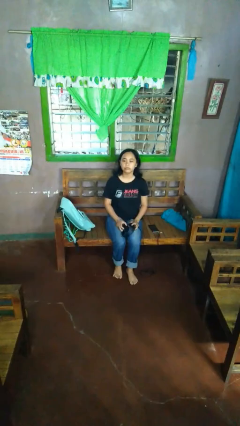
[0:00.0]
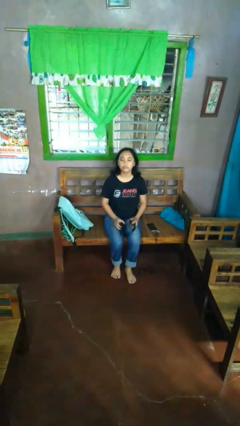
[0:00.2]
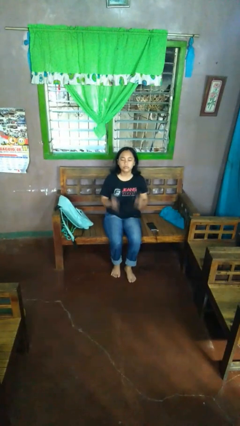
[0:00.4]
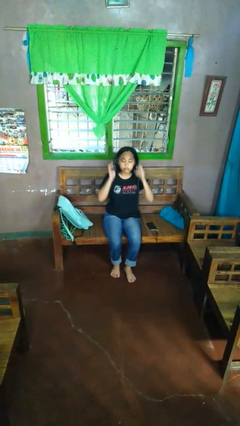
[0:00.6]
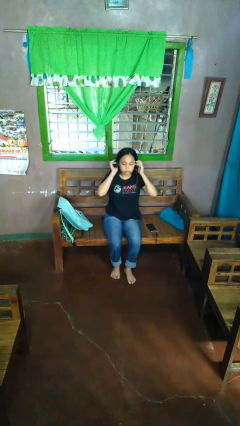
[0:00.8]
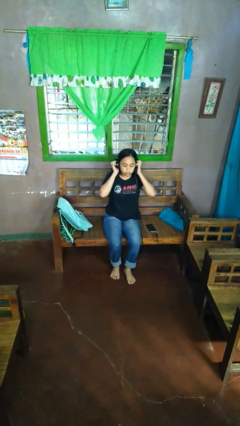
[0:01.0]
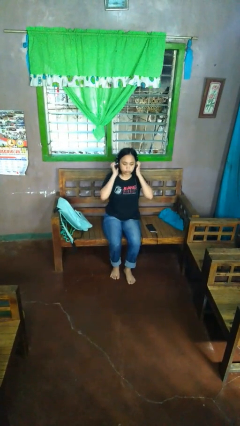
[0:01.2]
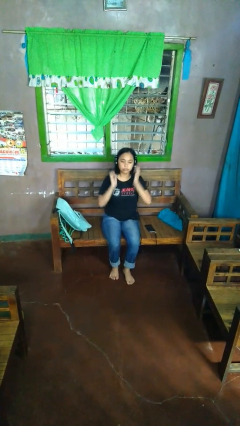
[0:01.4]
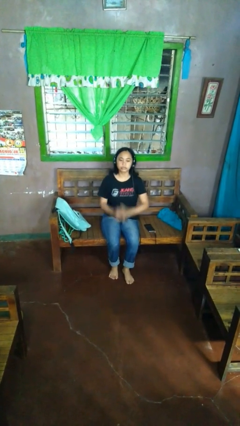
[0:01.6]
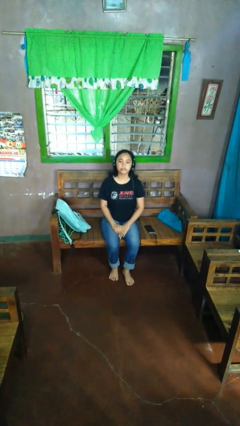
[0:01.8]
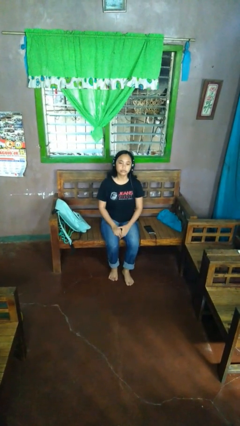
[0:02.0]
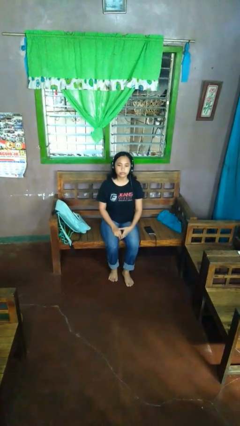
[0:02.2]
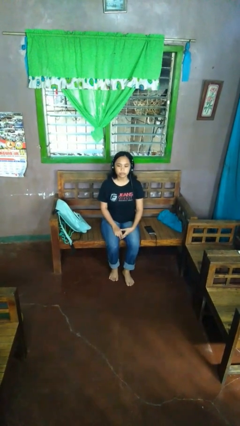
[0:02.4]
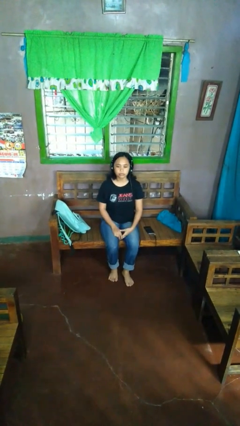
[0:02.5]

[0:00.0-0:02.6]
person puts on headphones

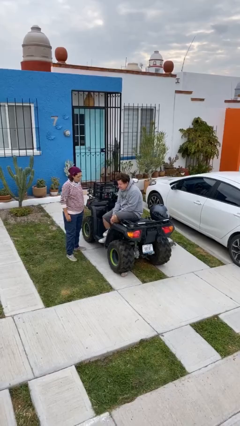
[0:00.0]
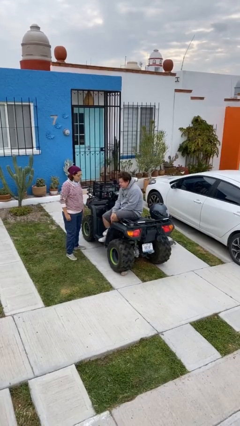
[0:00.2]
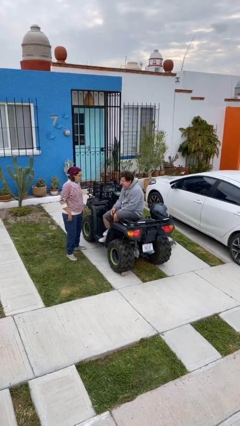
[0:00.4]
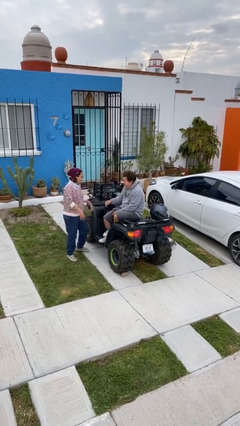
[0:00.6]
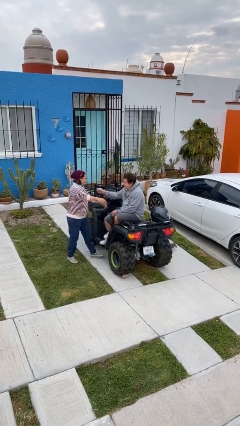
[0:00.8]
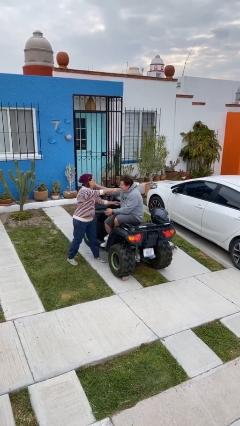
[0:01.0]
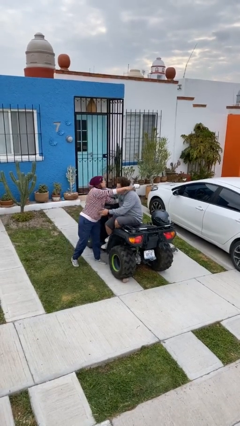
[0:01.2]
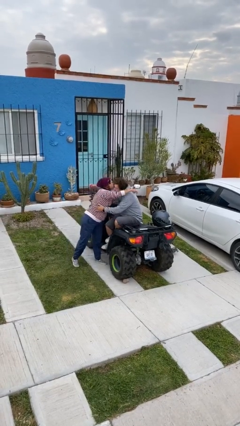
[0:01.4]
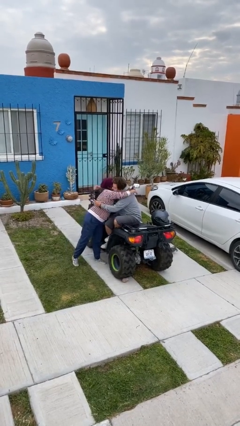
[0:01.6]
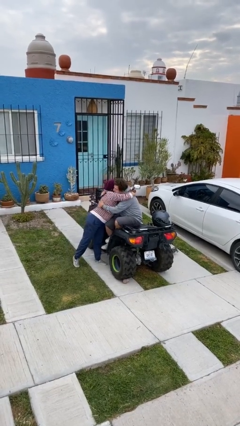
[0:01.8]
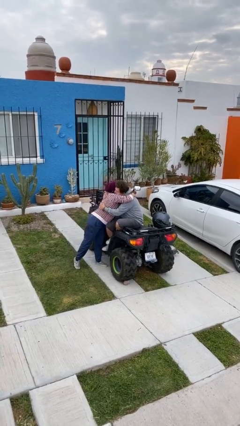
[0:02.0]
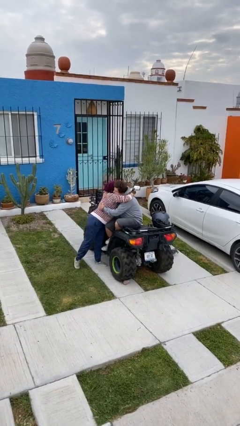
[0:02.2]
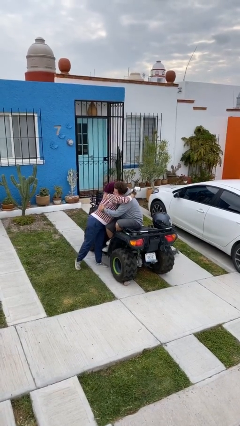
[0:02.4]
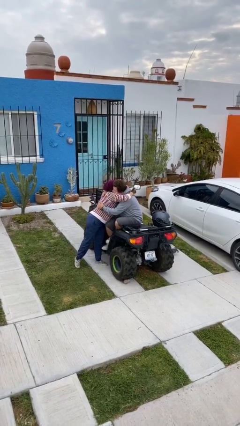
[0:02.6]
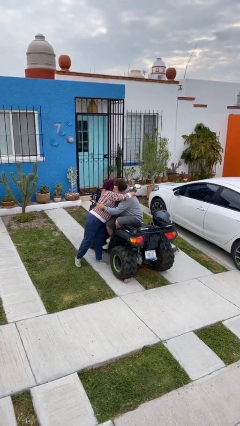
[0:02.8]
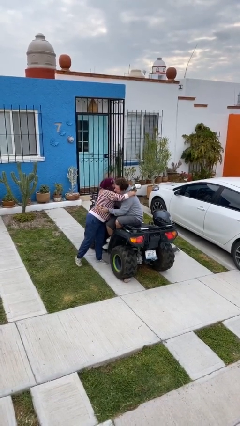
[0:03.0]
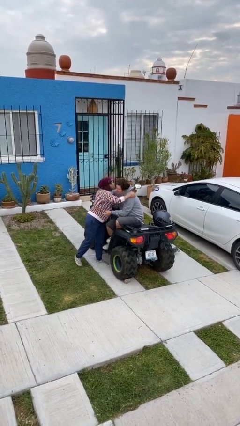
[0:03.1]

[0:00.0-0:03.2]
person embraces person

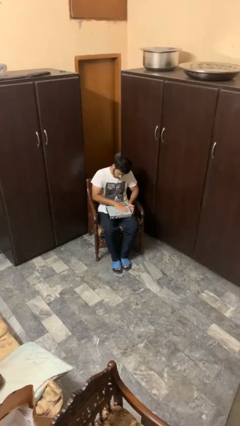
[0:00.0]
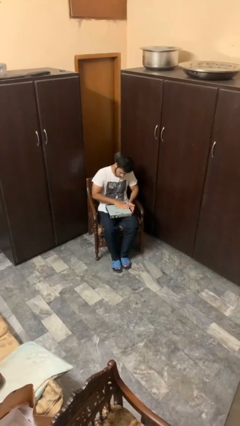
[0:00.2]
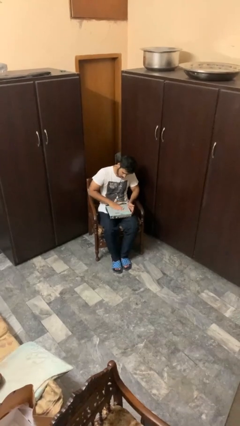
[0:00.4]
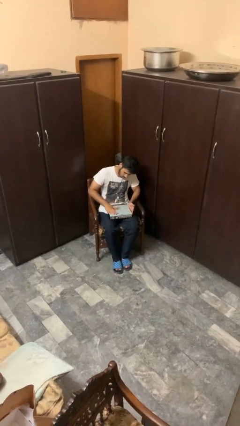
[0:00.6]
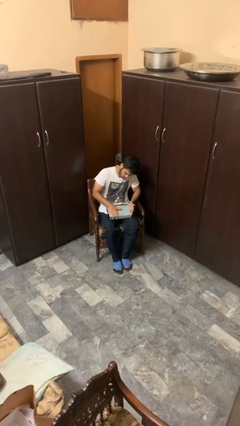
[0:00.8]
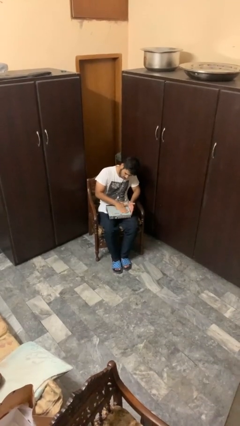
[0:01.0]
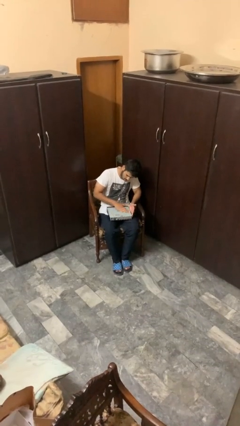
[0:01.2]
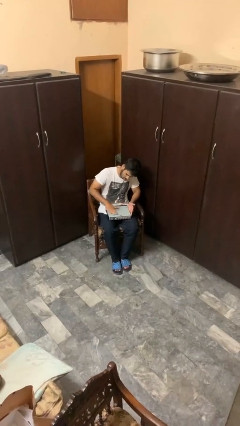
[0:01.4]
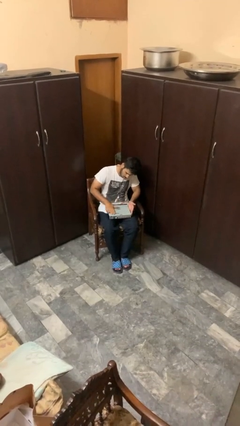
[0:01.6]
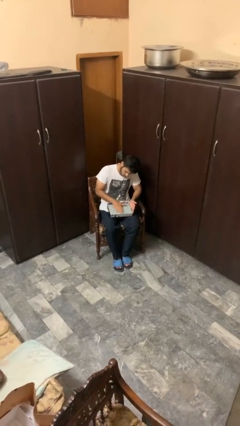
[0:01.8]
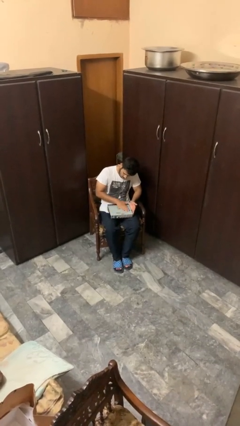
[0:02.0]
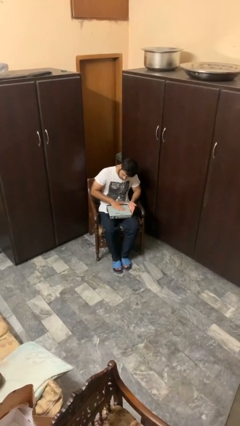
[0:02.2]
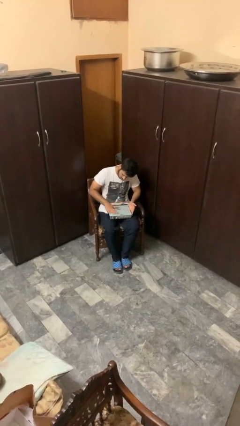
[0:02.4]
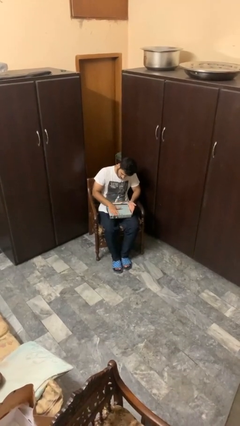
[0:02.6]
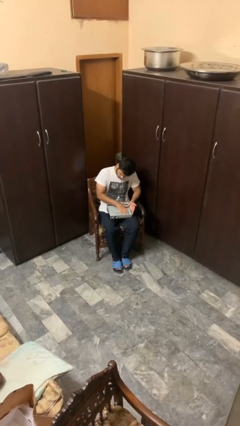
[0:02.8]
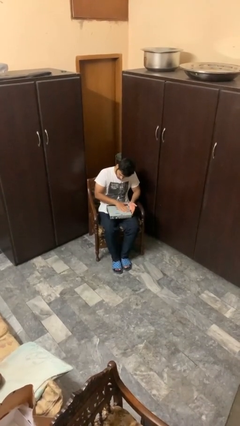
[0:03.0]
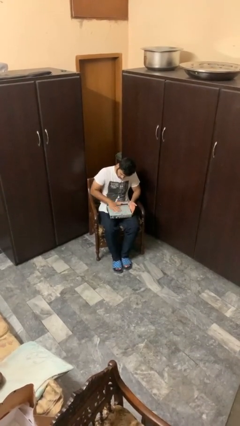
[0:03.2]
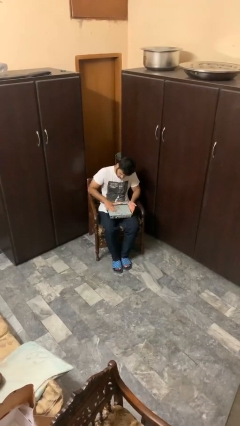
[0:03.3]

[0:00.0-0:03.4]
person waves hand over object

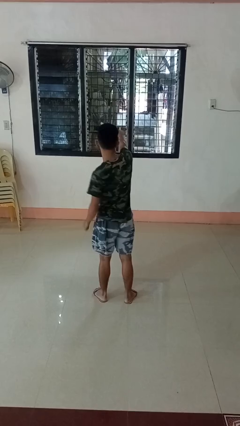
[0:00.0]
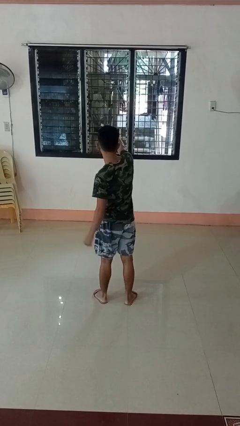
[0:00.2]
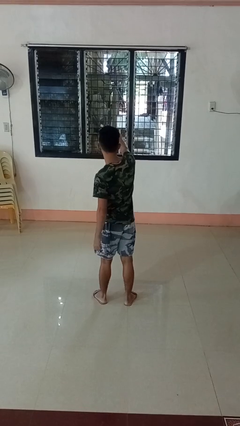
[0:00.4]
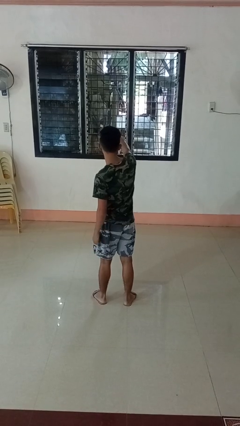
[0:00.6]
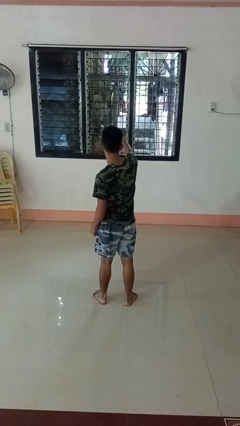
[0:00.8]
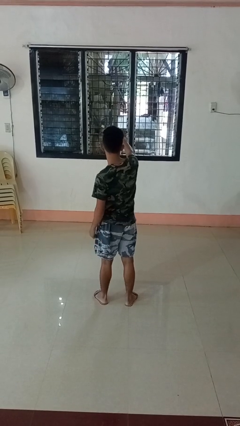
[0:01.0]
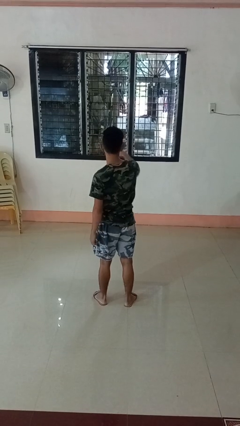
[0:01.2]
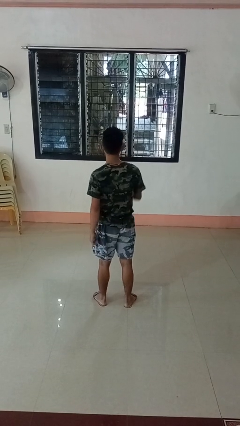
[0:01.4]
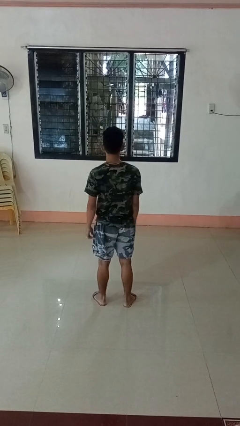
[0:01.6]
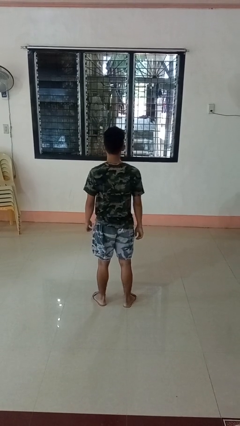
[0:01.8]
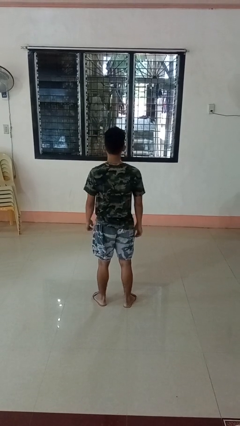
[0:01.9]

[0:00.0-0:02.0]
person punches

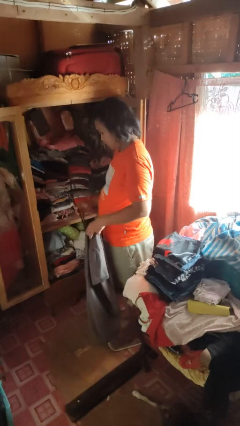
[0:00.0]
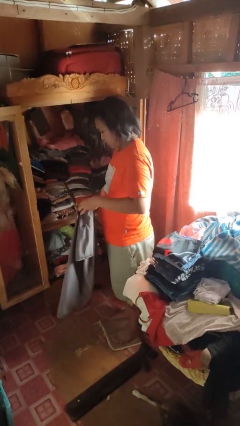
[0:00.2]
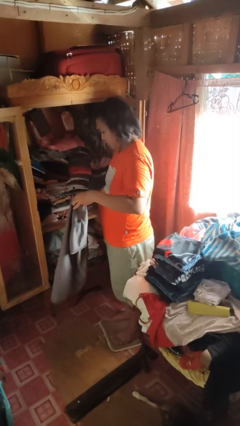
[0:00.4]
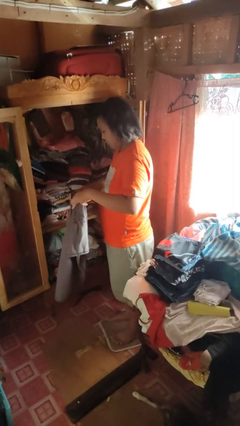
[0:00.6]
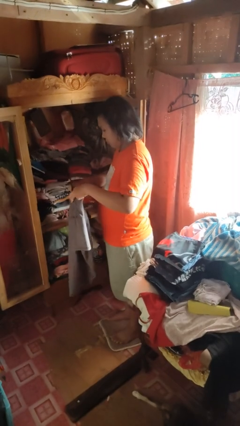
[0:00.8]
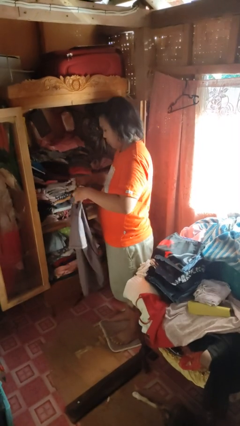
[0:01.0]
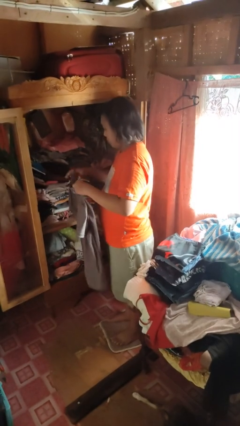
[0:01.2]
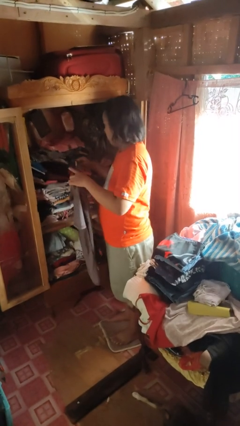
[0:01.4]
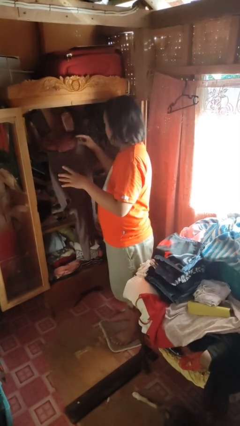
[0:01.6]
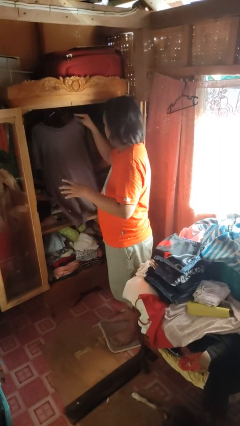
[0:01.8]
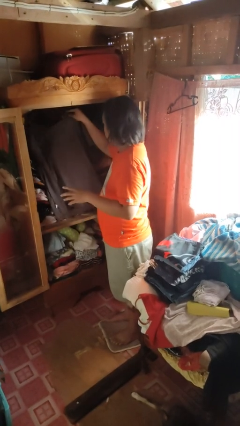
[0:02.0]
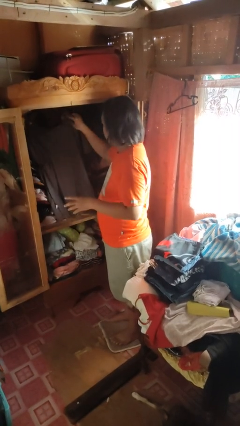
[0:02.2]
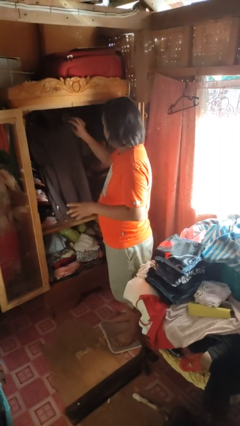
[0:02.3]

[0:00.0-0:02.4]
person puts clothes into closet

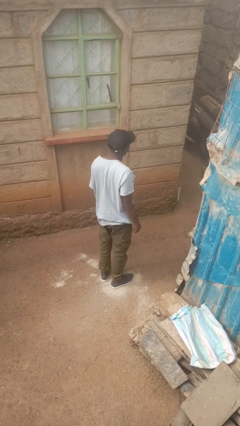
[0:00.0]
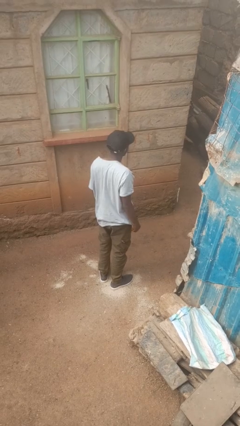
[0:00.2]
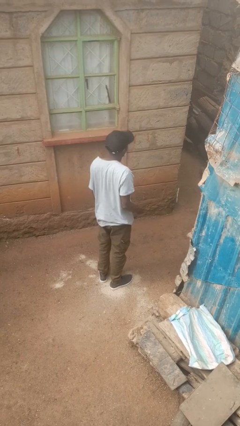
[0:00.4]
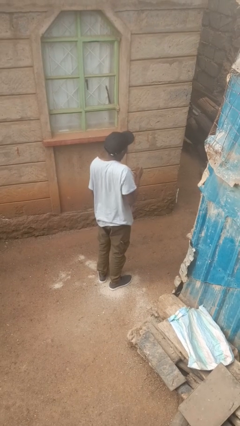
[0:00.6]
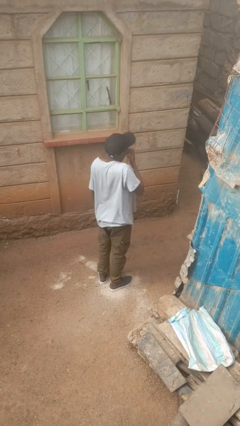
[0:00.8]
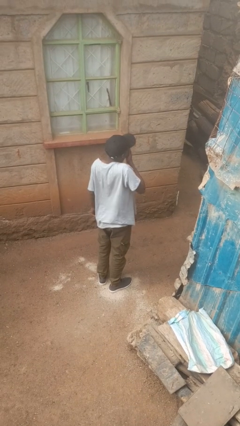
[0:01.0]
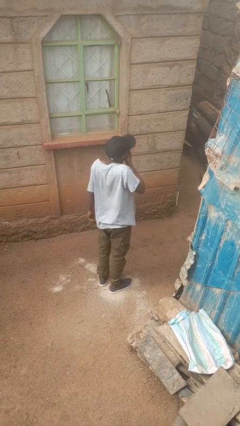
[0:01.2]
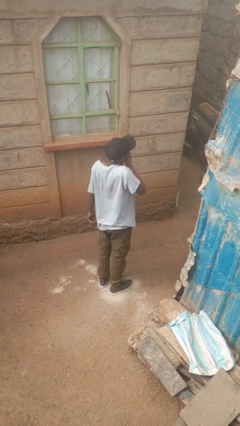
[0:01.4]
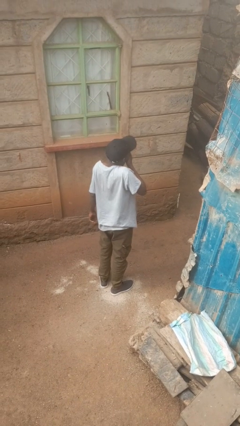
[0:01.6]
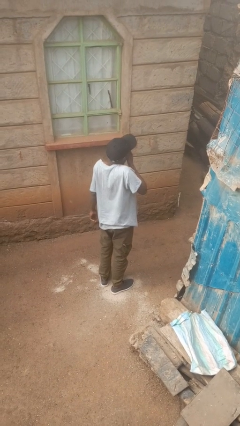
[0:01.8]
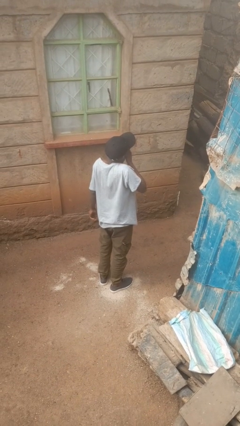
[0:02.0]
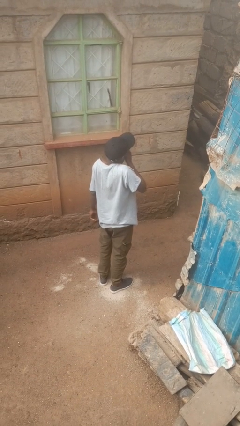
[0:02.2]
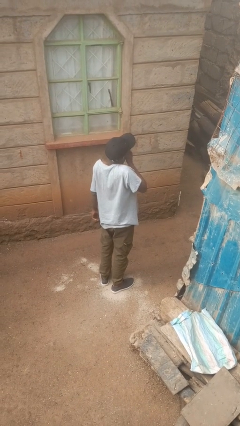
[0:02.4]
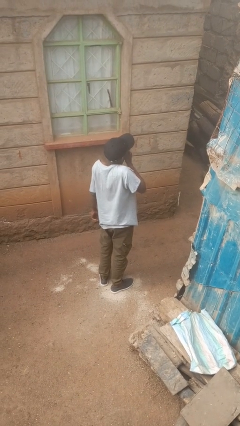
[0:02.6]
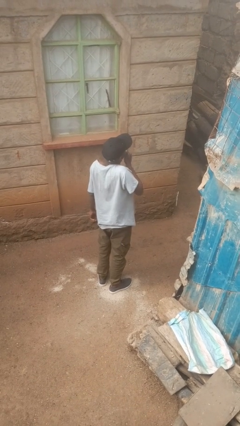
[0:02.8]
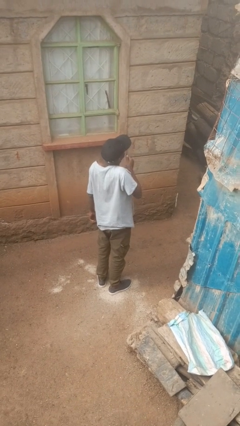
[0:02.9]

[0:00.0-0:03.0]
person yawns

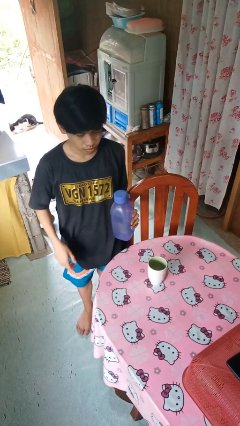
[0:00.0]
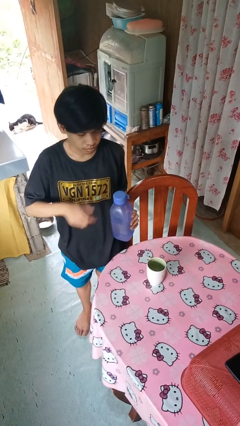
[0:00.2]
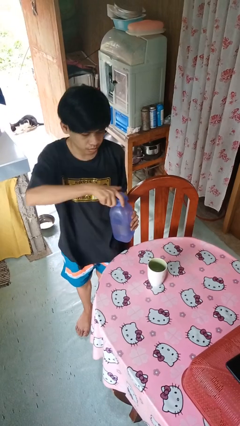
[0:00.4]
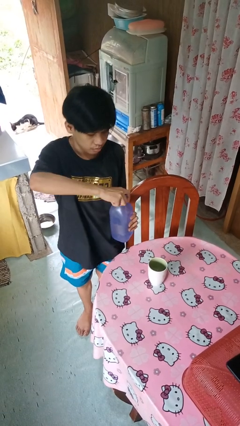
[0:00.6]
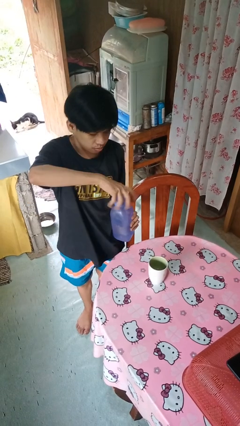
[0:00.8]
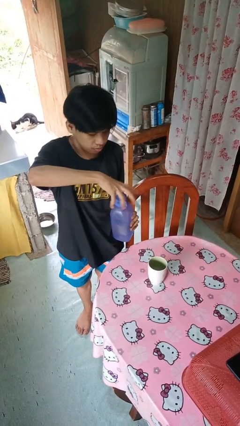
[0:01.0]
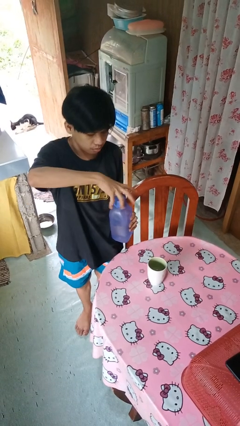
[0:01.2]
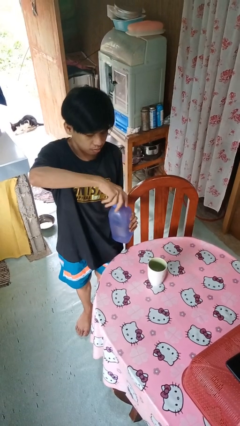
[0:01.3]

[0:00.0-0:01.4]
person unscrews lid from bottle
